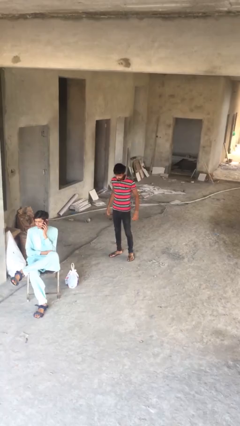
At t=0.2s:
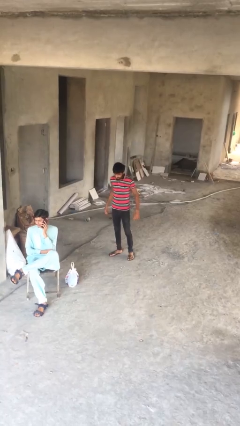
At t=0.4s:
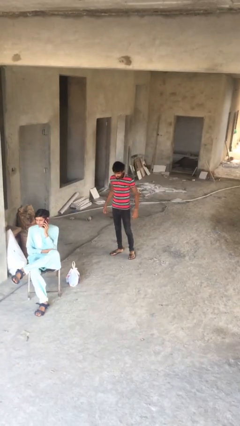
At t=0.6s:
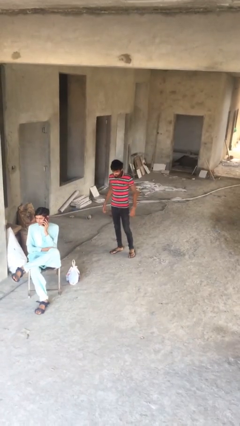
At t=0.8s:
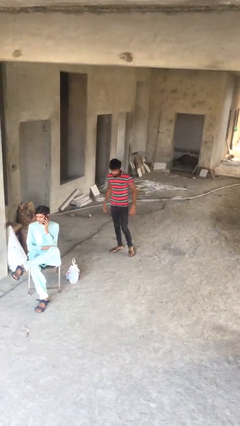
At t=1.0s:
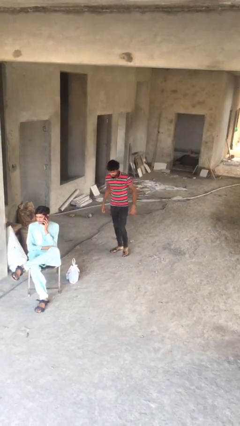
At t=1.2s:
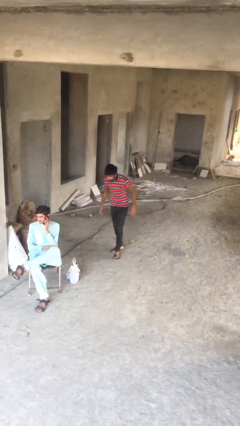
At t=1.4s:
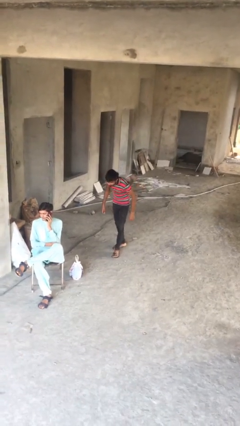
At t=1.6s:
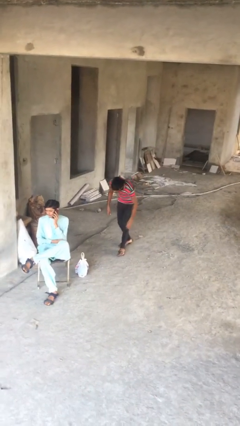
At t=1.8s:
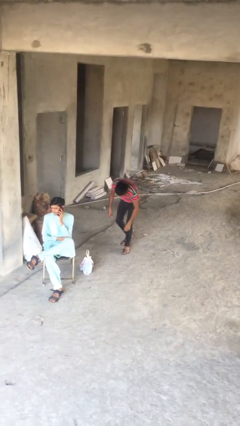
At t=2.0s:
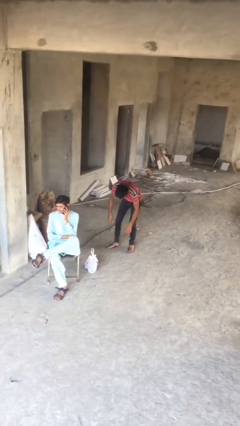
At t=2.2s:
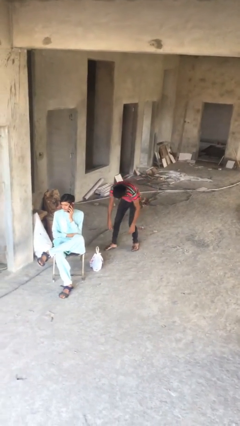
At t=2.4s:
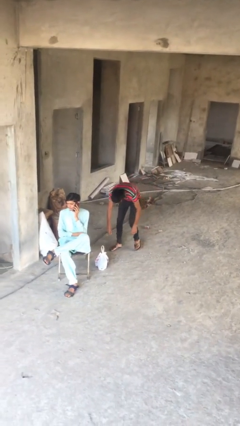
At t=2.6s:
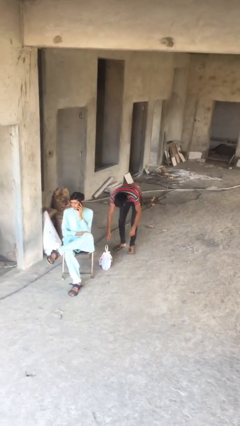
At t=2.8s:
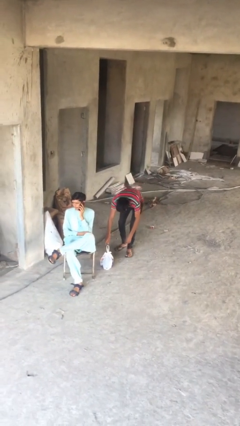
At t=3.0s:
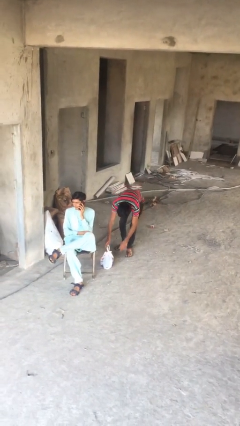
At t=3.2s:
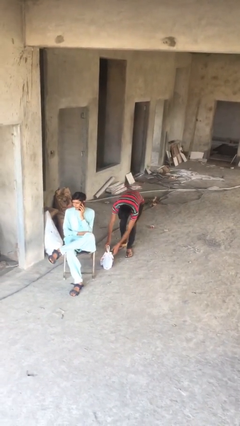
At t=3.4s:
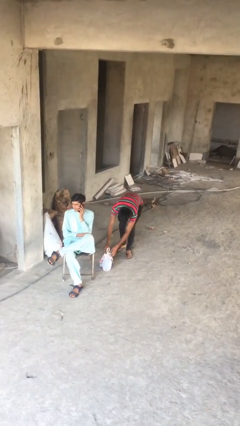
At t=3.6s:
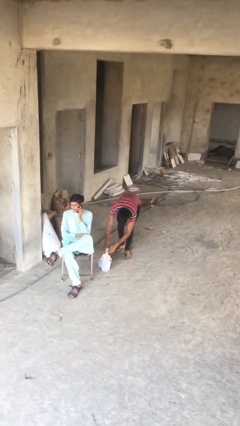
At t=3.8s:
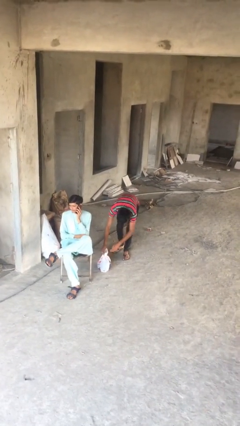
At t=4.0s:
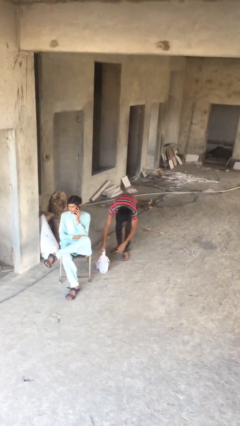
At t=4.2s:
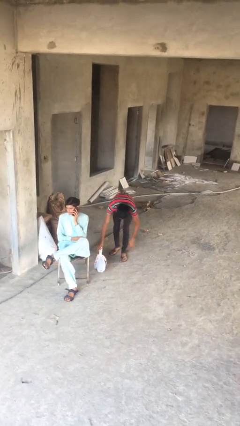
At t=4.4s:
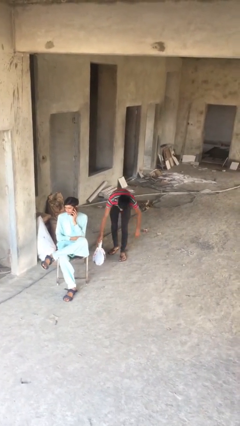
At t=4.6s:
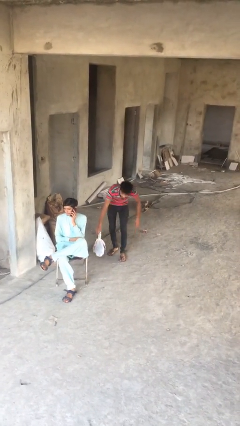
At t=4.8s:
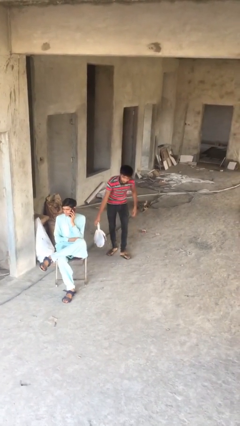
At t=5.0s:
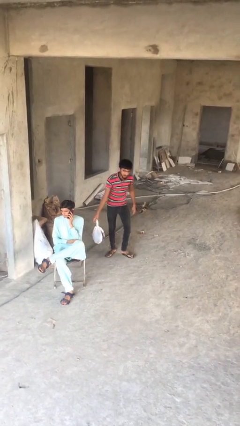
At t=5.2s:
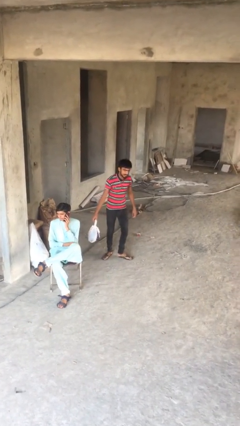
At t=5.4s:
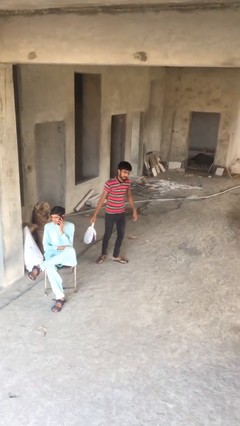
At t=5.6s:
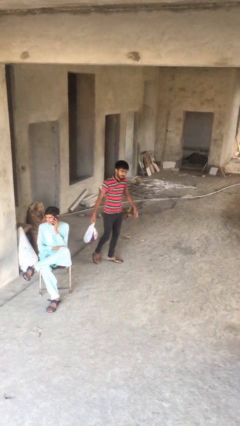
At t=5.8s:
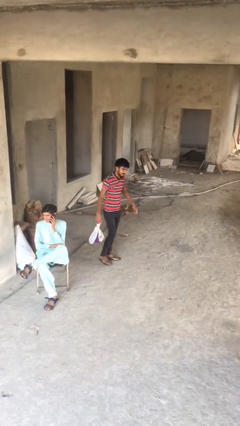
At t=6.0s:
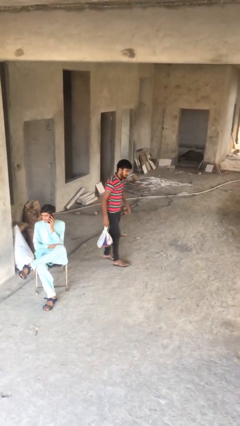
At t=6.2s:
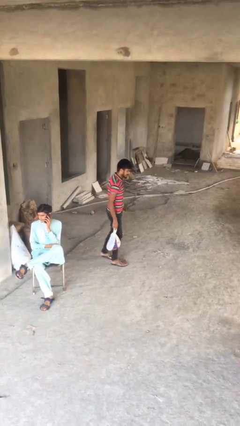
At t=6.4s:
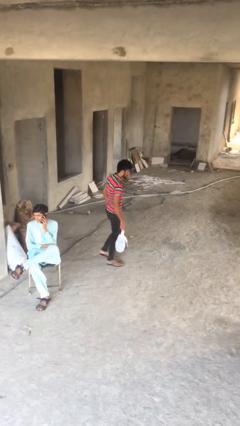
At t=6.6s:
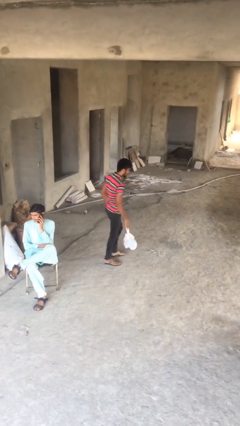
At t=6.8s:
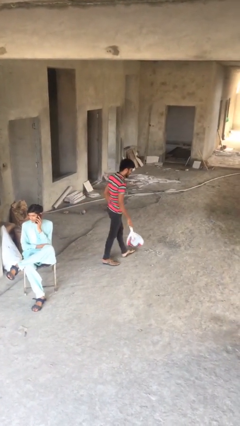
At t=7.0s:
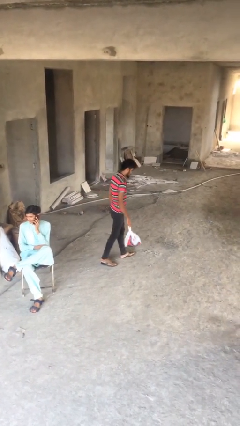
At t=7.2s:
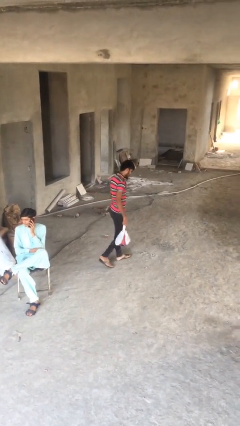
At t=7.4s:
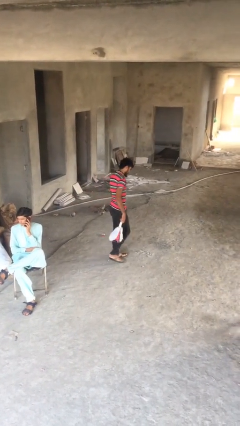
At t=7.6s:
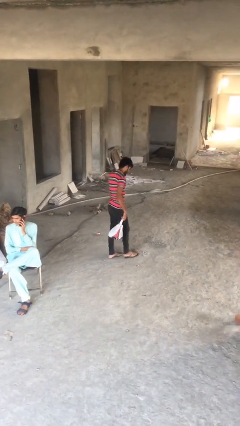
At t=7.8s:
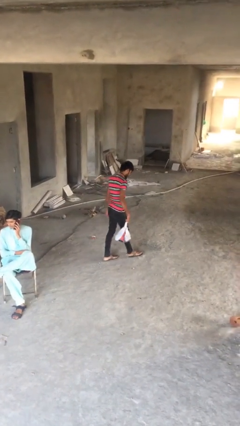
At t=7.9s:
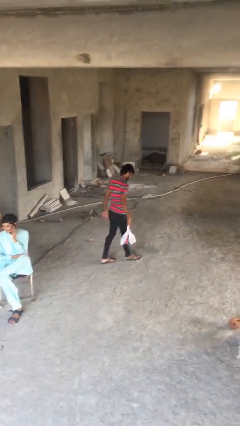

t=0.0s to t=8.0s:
person steals object from person

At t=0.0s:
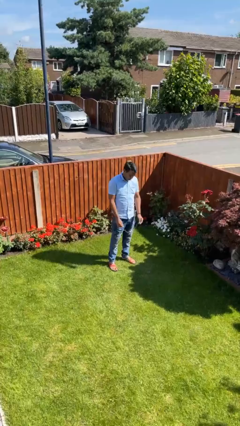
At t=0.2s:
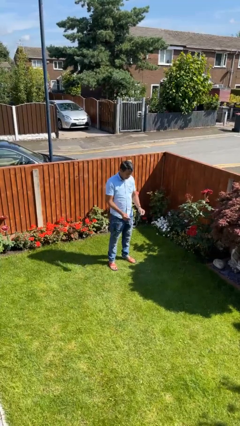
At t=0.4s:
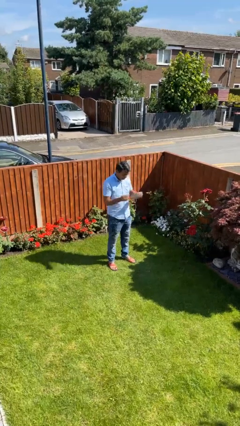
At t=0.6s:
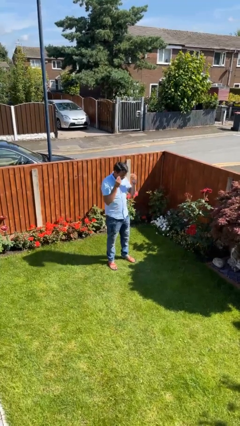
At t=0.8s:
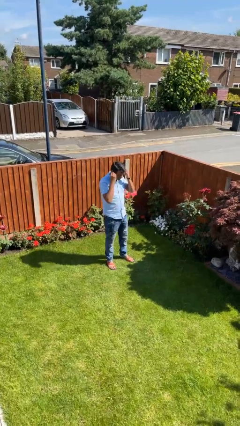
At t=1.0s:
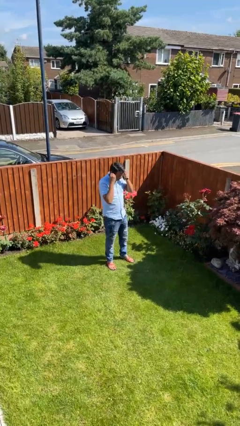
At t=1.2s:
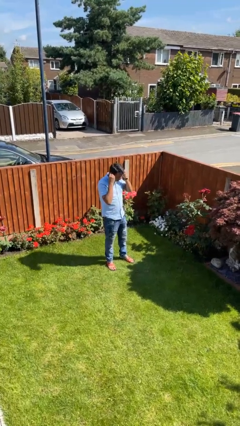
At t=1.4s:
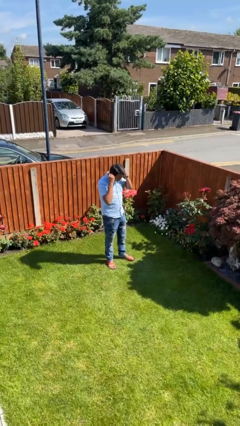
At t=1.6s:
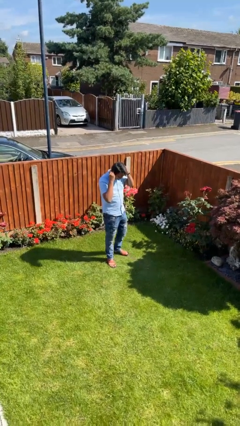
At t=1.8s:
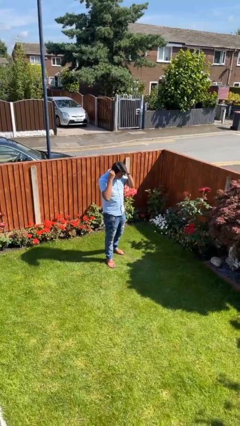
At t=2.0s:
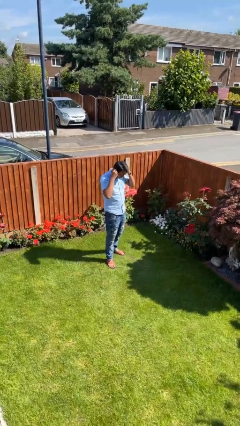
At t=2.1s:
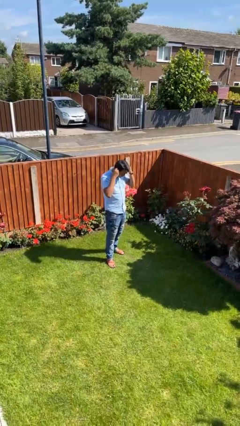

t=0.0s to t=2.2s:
person puts on headphones

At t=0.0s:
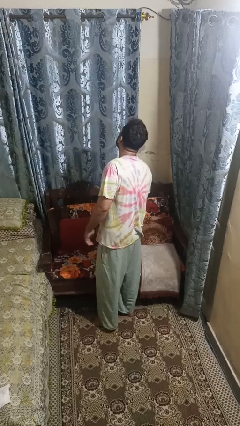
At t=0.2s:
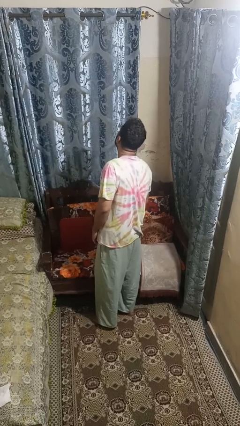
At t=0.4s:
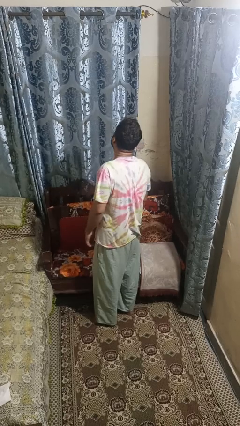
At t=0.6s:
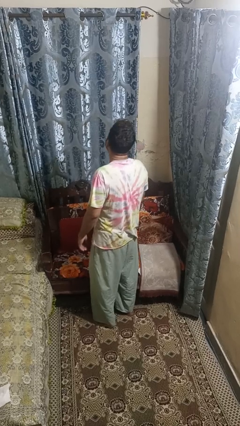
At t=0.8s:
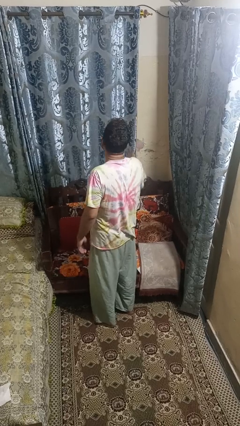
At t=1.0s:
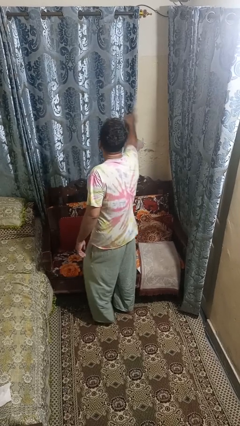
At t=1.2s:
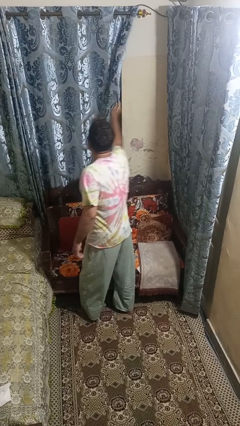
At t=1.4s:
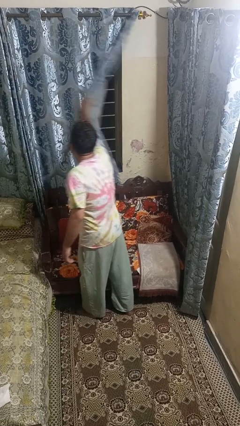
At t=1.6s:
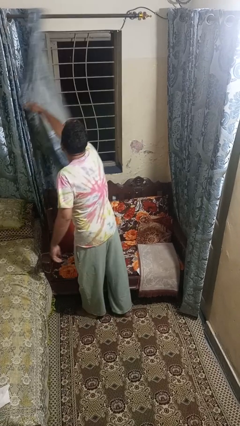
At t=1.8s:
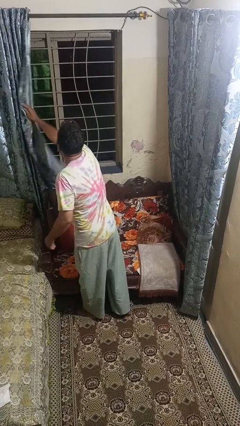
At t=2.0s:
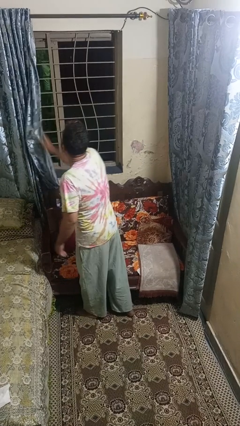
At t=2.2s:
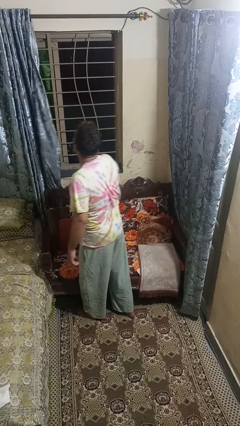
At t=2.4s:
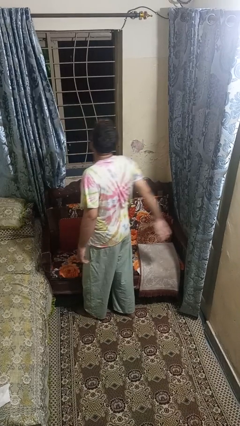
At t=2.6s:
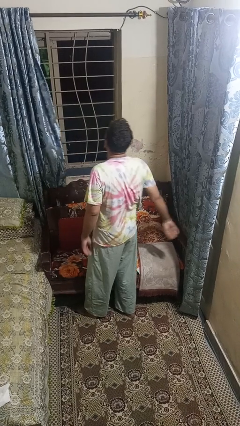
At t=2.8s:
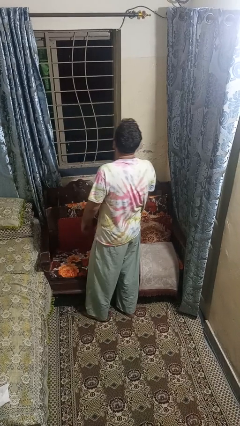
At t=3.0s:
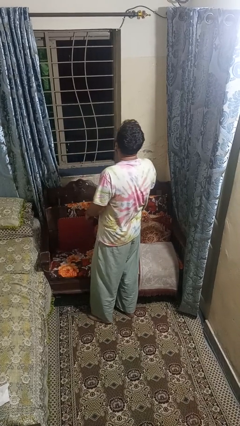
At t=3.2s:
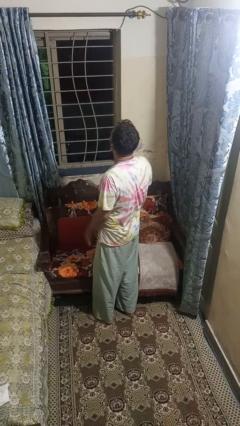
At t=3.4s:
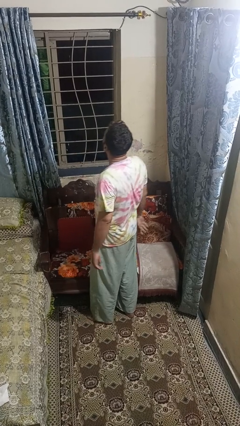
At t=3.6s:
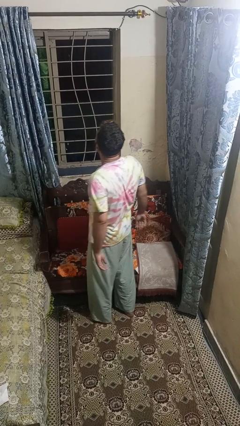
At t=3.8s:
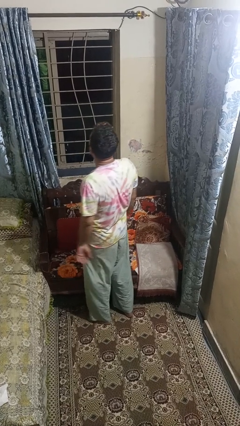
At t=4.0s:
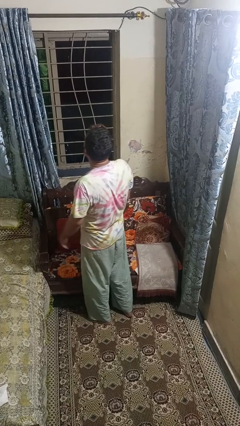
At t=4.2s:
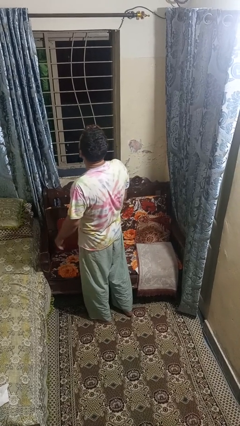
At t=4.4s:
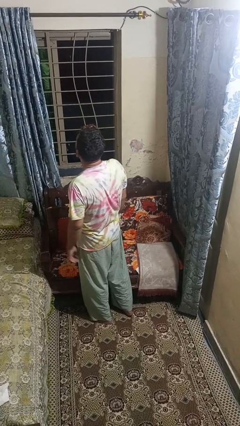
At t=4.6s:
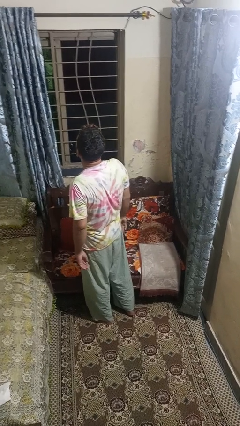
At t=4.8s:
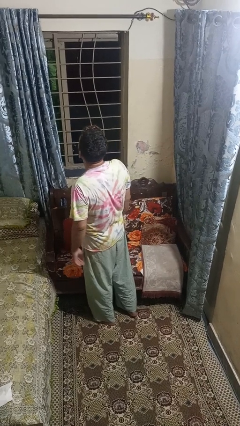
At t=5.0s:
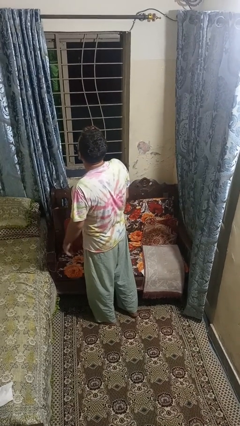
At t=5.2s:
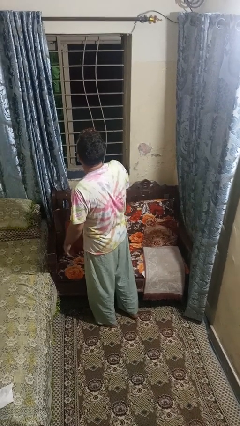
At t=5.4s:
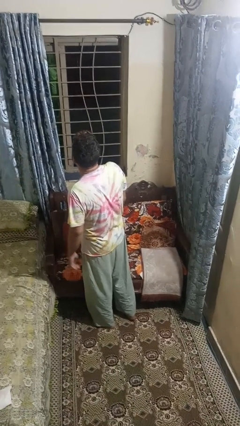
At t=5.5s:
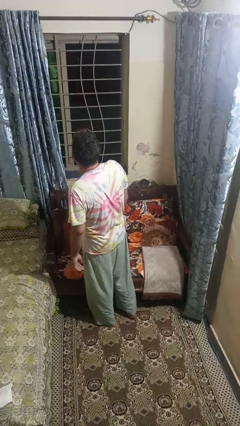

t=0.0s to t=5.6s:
person opens curtains

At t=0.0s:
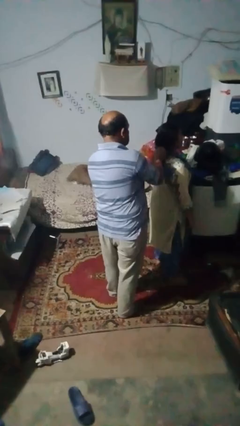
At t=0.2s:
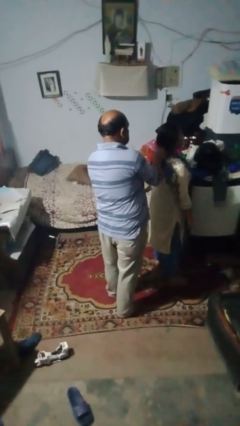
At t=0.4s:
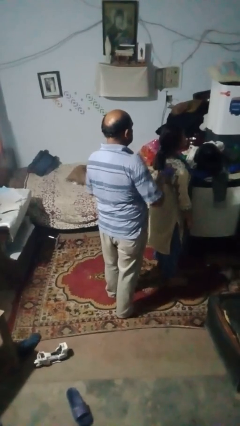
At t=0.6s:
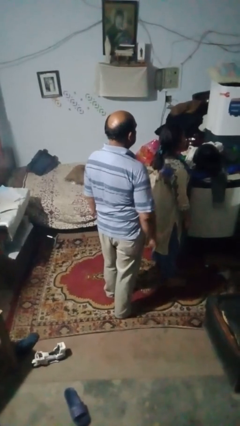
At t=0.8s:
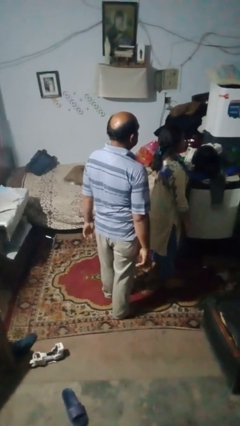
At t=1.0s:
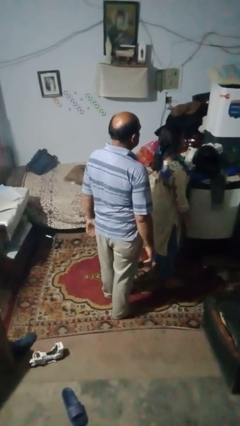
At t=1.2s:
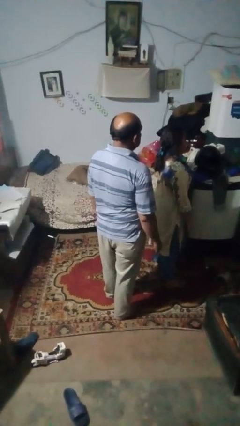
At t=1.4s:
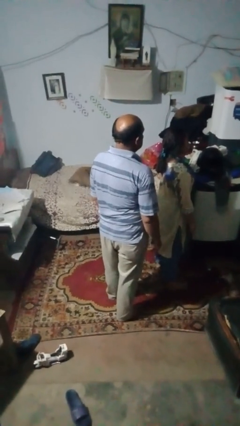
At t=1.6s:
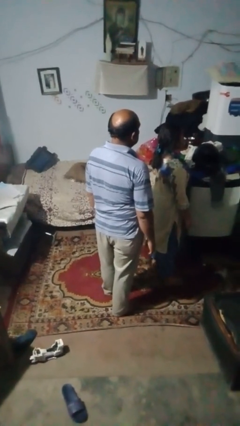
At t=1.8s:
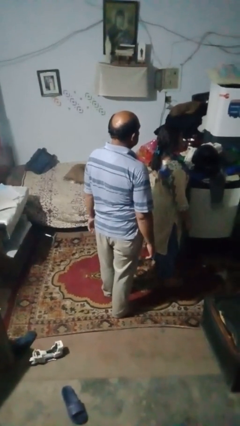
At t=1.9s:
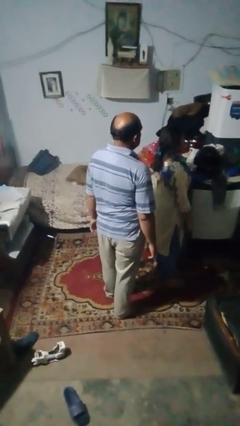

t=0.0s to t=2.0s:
person braids hair of person
